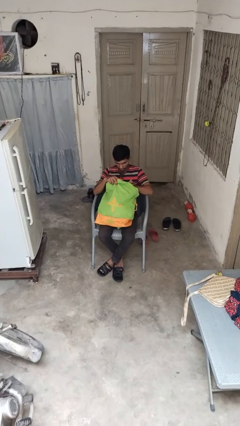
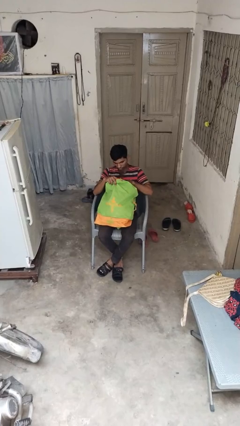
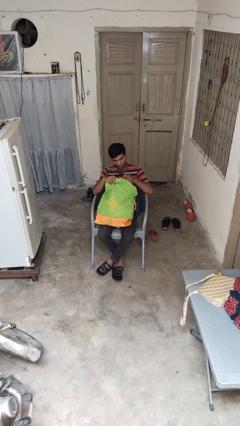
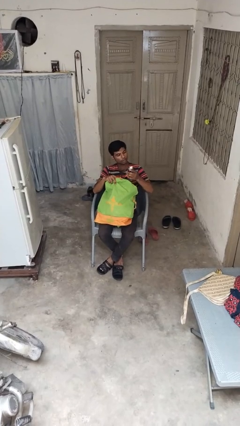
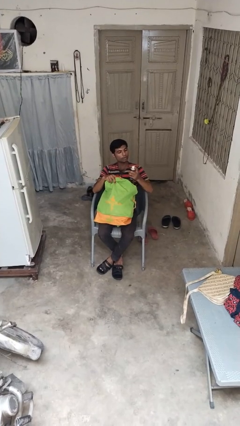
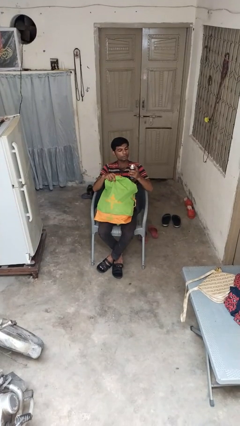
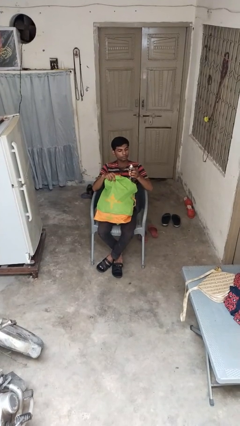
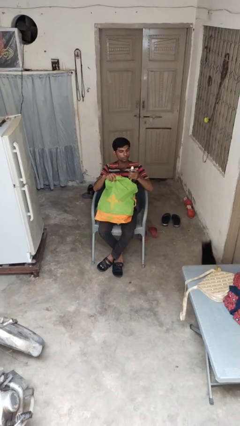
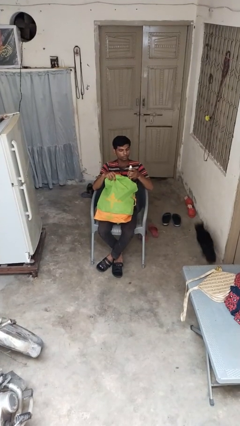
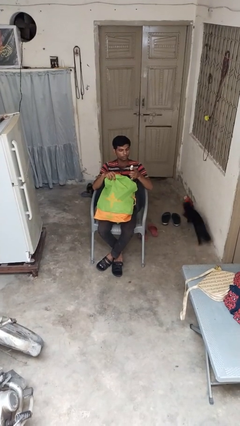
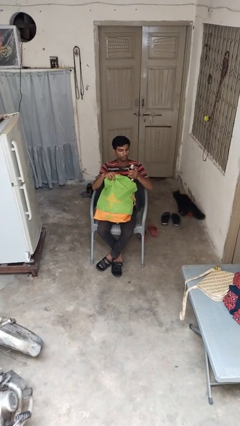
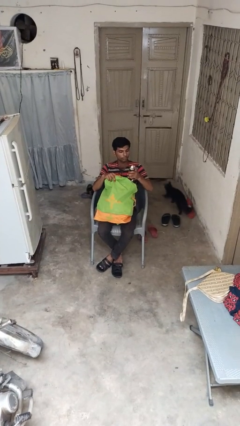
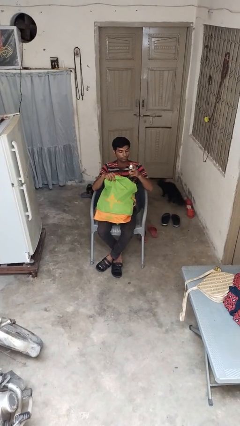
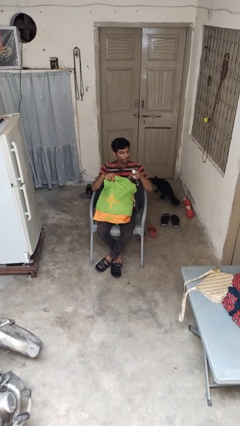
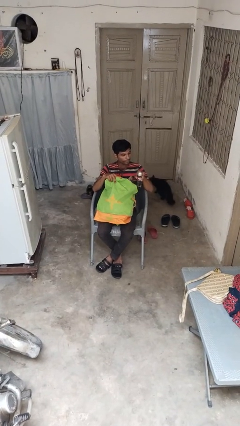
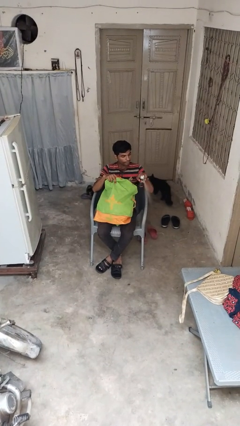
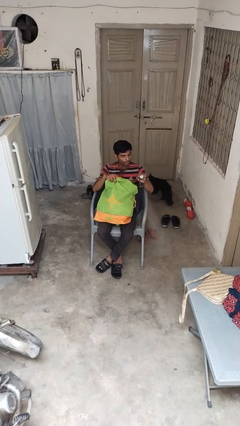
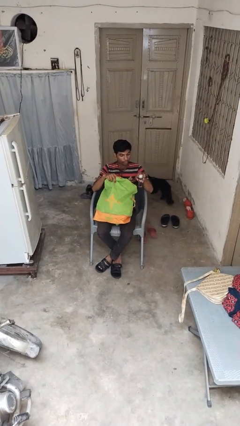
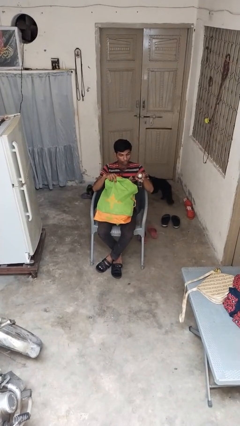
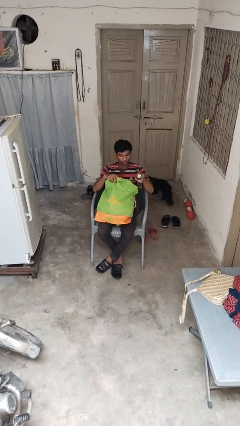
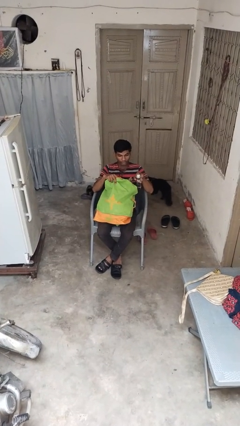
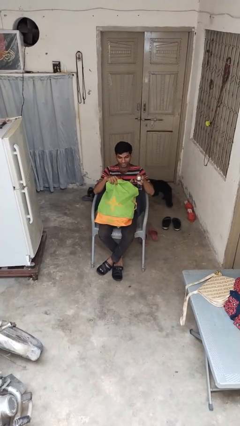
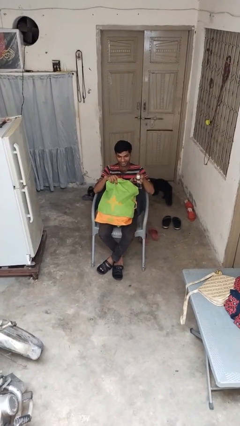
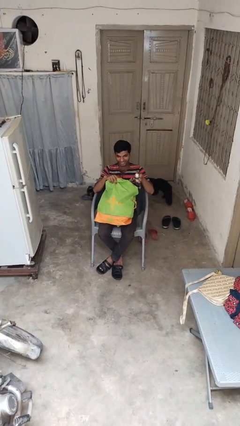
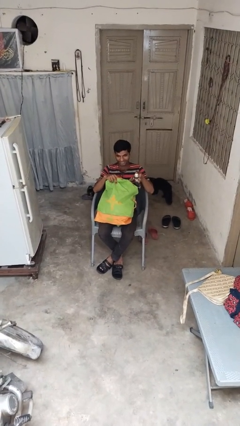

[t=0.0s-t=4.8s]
person takes object from backpack

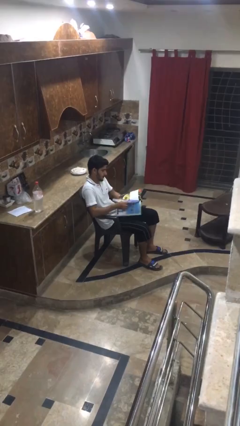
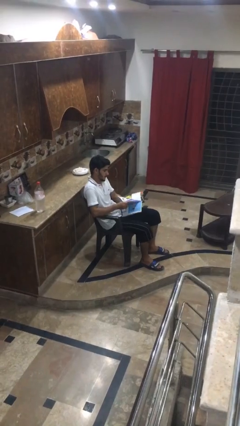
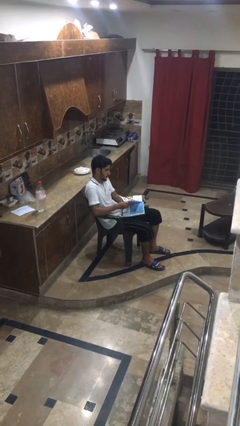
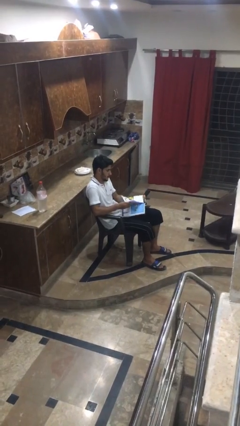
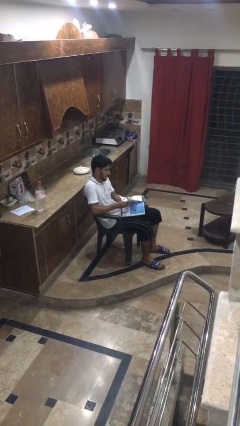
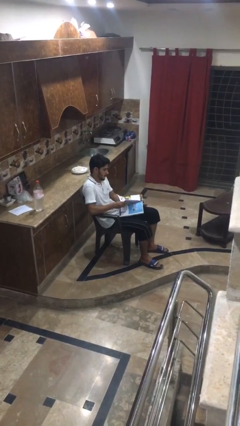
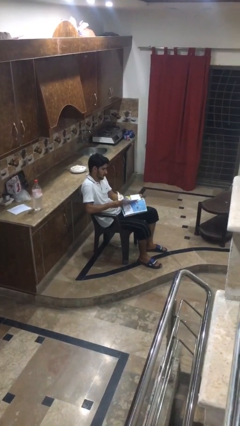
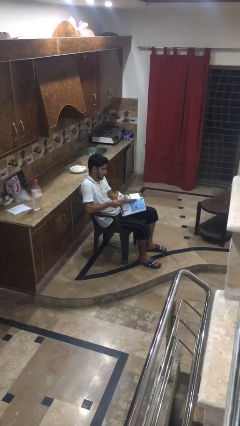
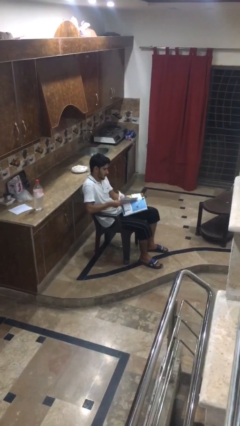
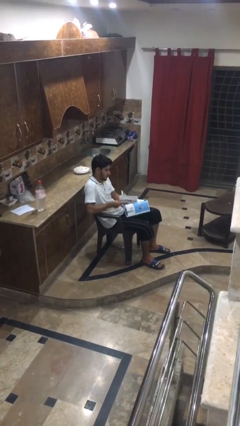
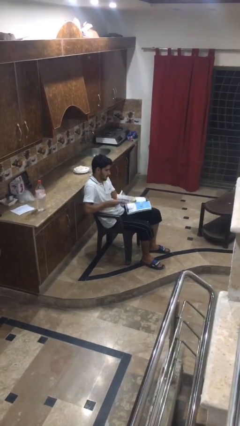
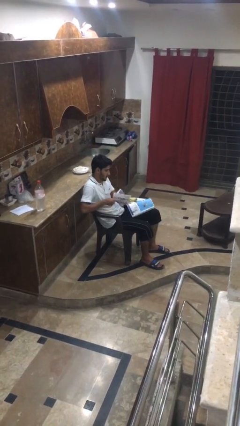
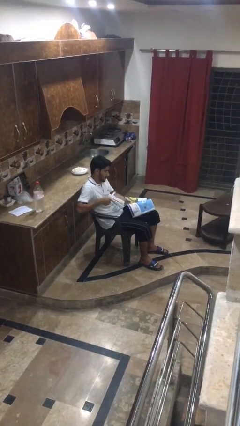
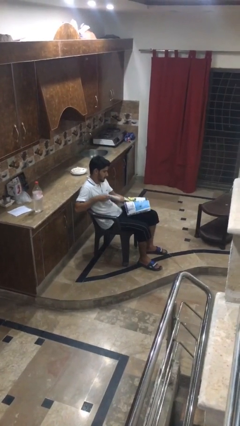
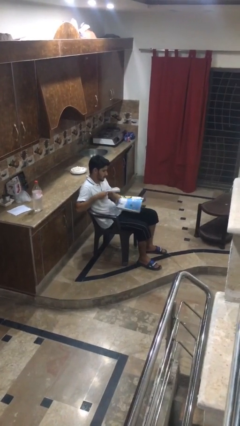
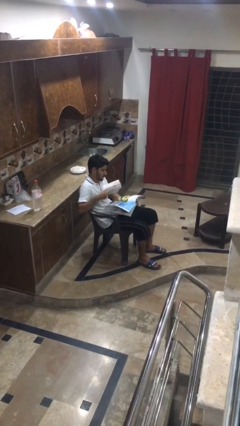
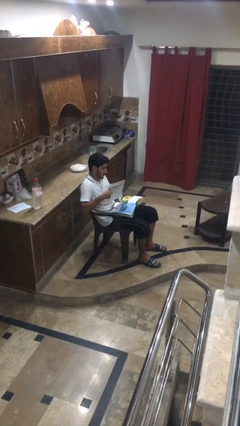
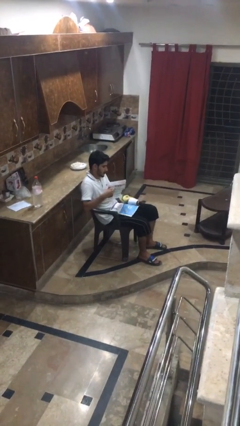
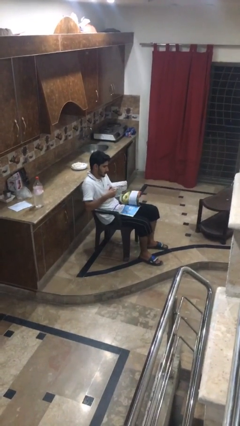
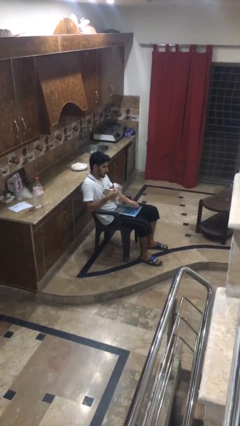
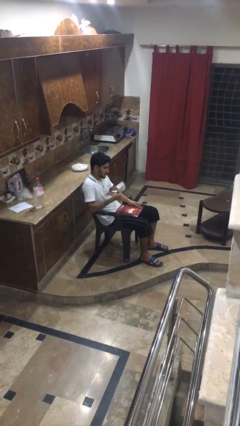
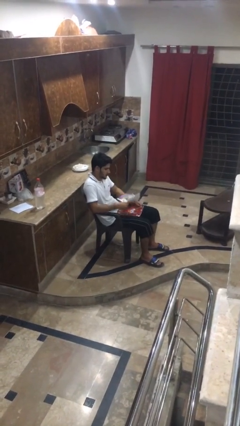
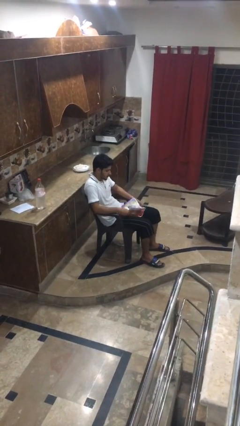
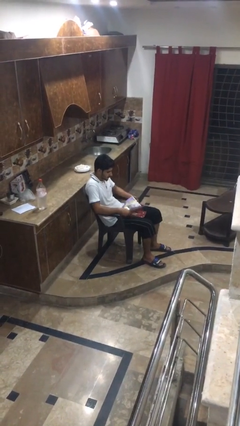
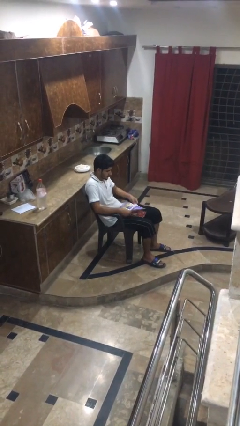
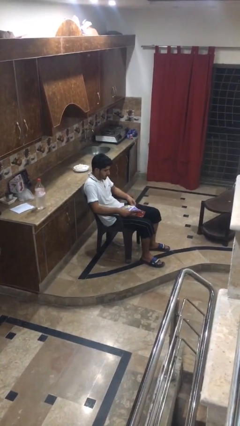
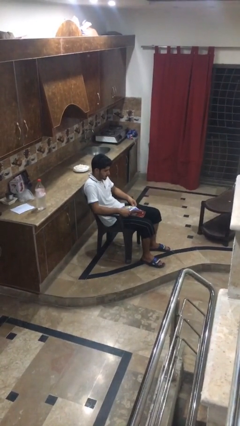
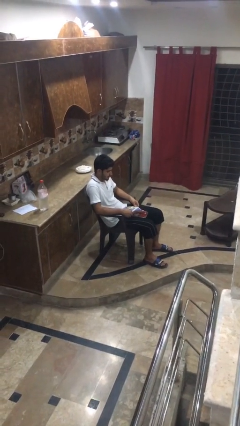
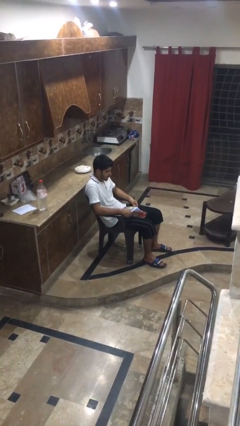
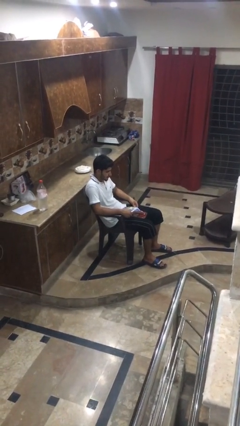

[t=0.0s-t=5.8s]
person tears paper

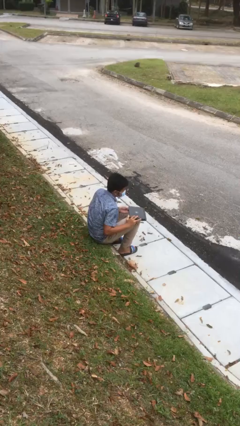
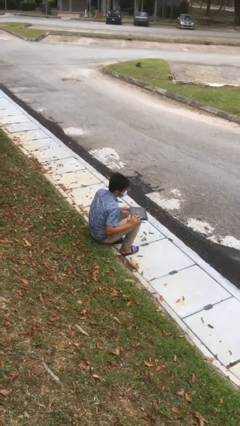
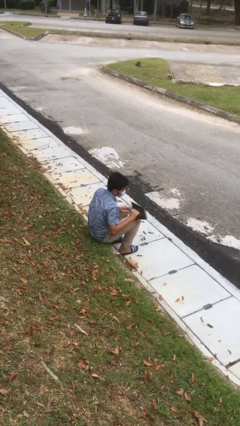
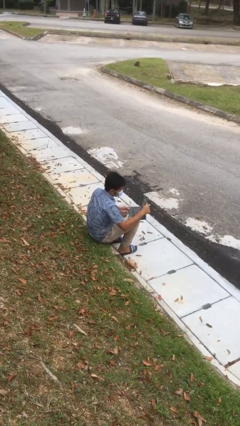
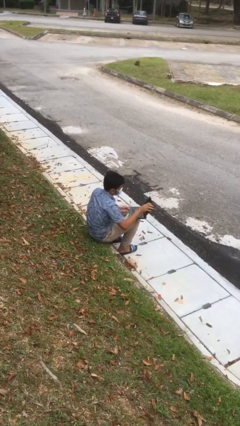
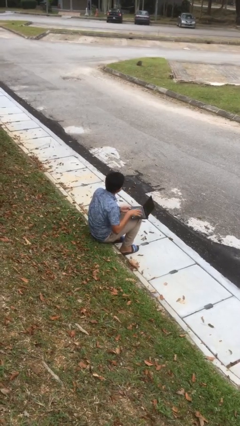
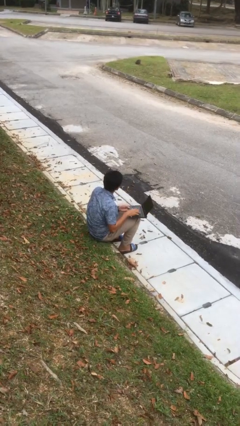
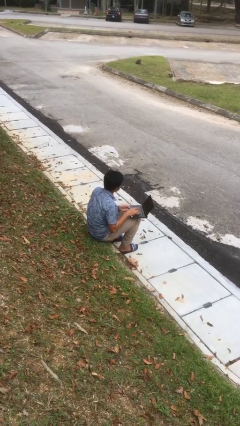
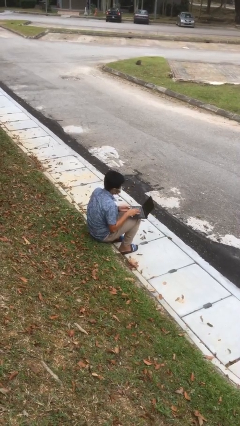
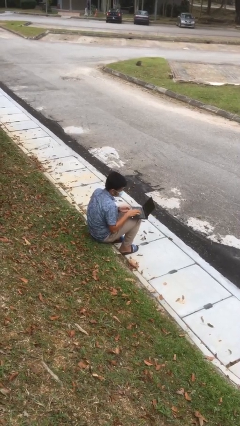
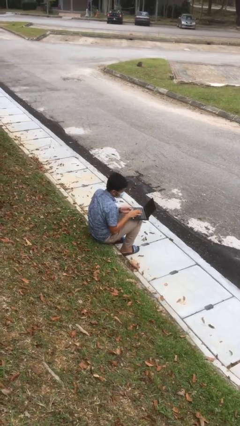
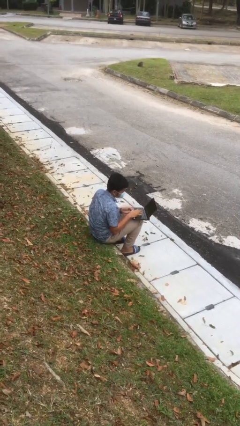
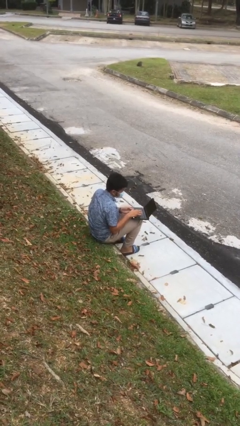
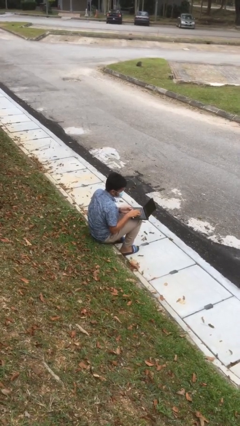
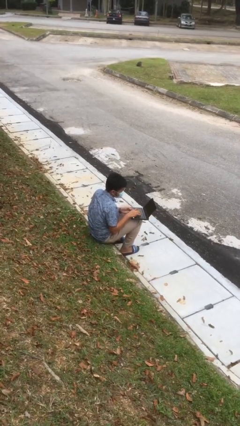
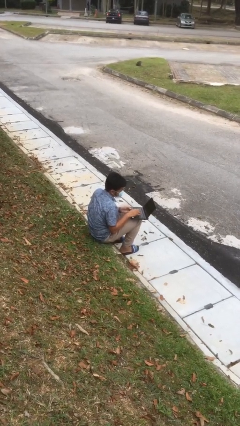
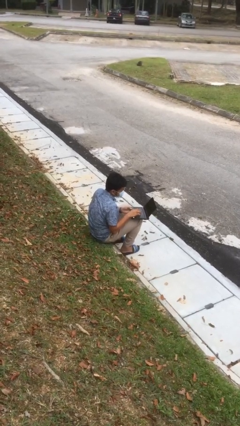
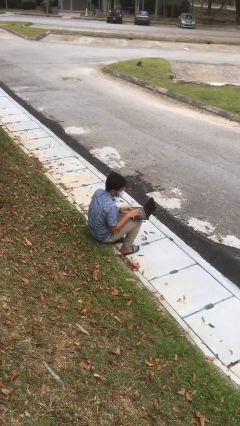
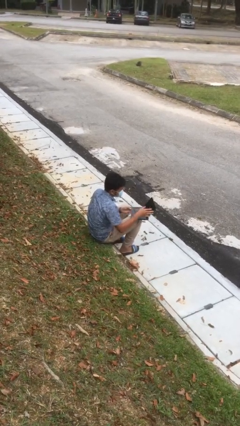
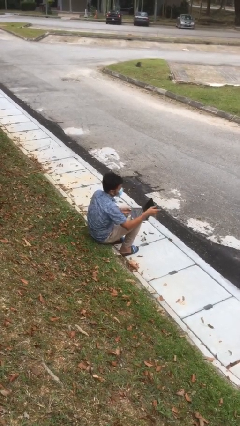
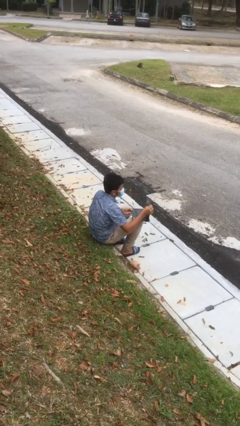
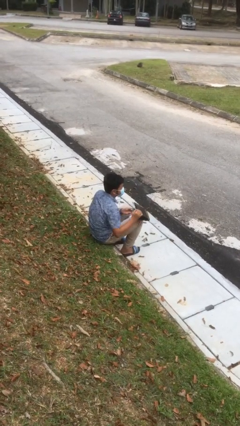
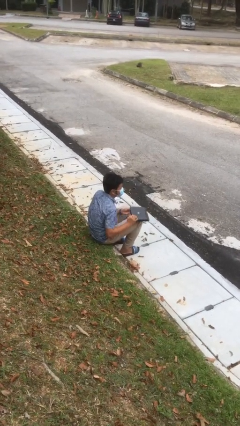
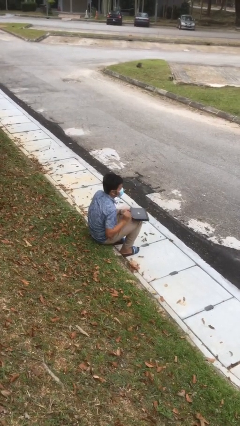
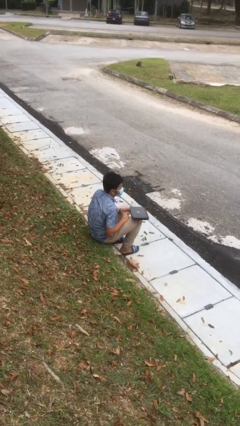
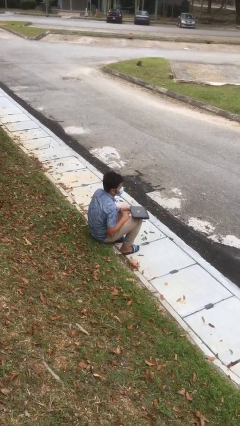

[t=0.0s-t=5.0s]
person interacts with laptop

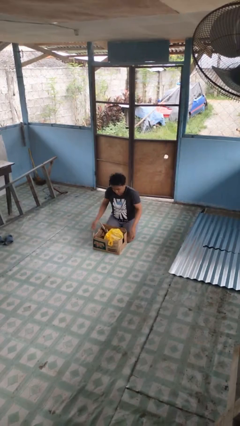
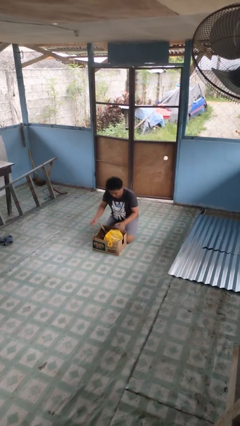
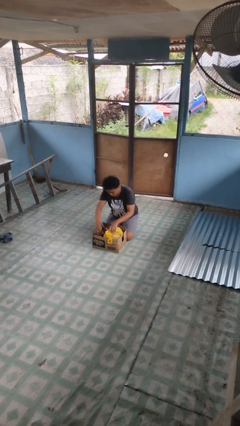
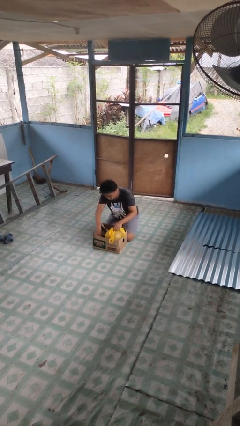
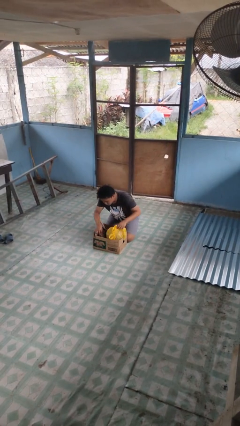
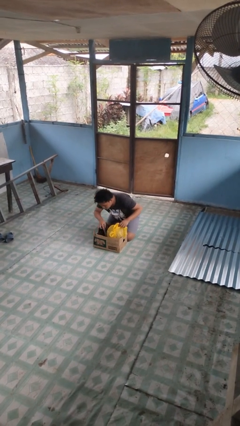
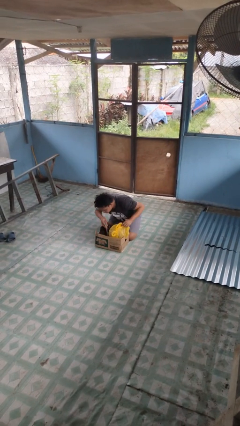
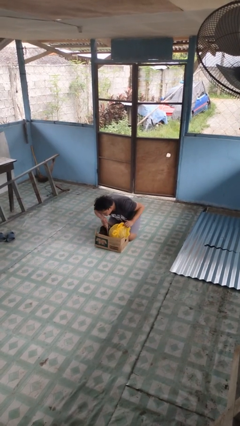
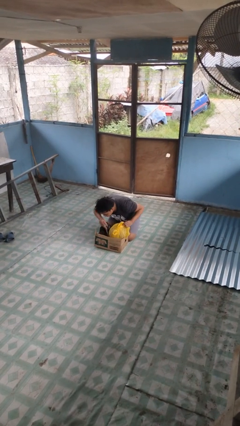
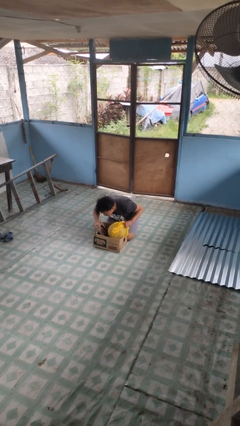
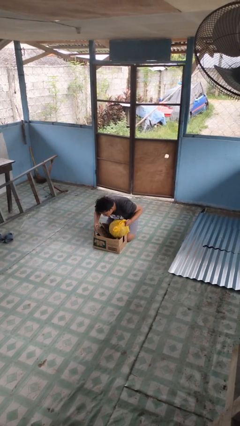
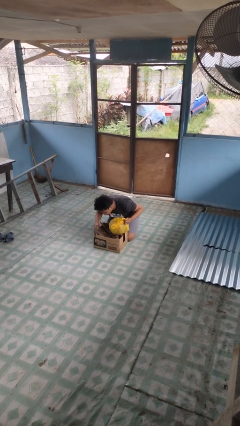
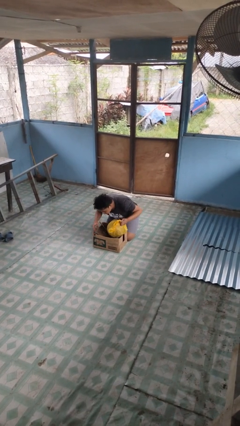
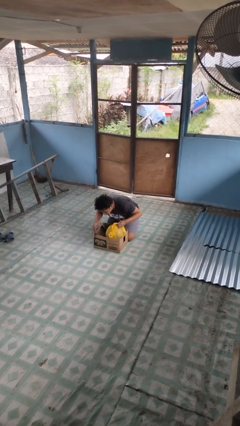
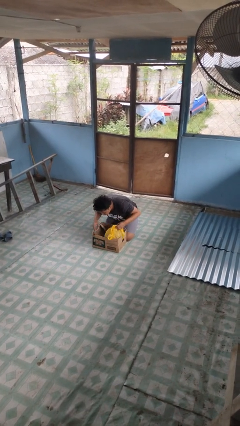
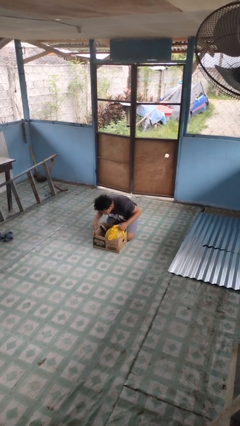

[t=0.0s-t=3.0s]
person searches in box
